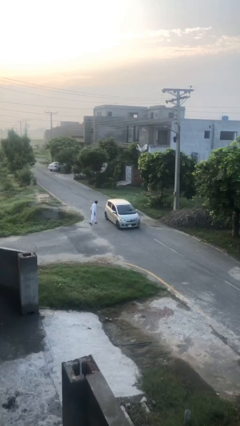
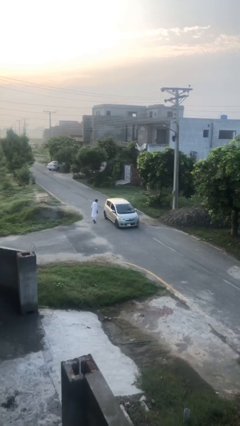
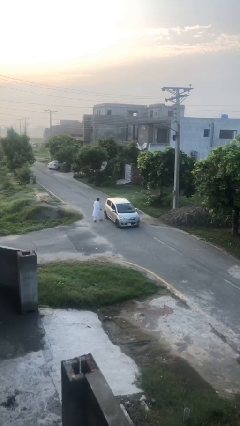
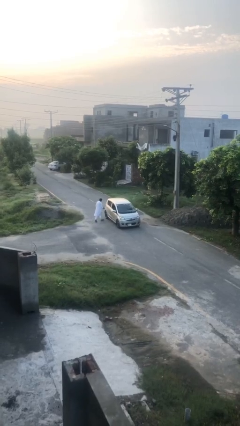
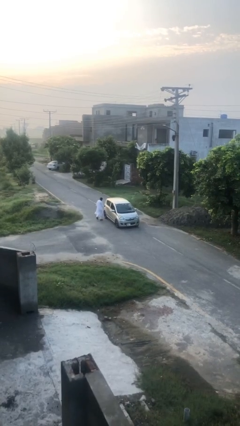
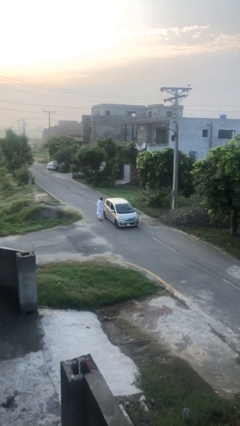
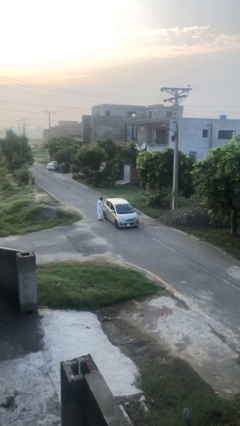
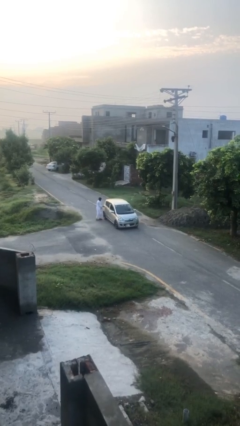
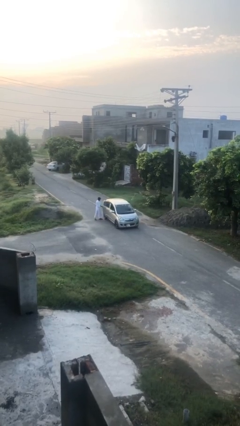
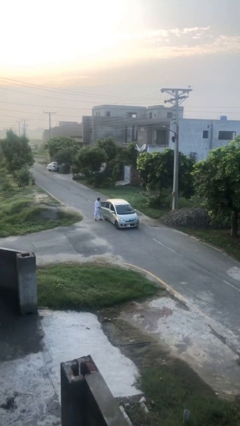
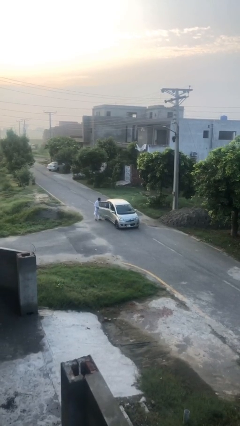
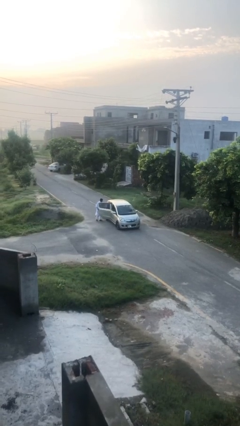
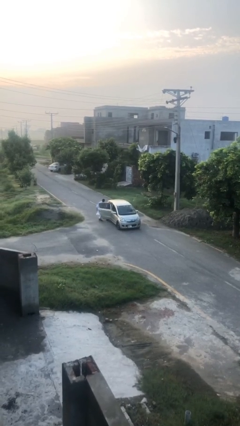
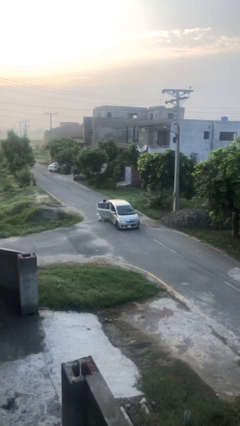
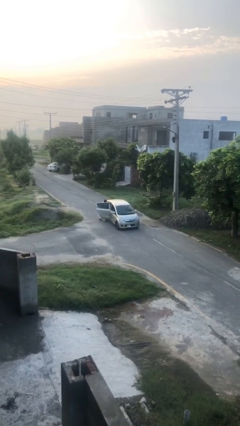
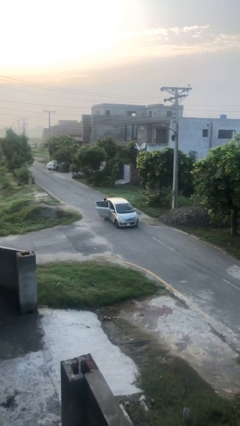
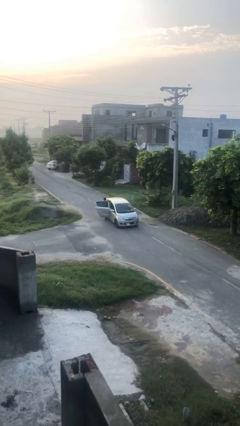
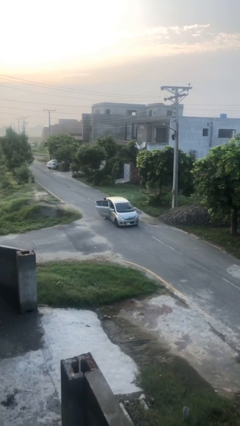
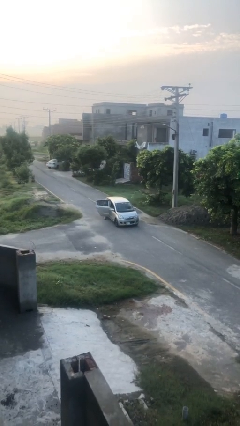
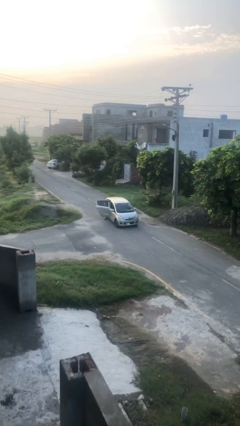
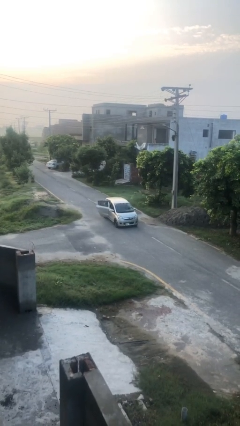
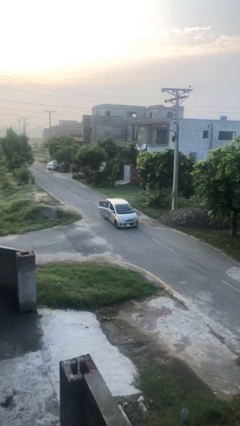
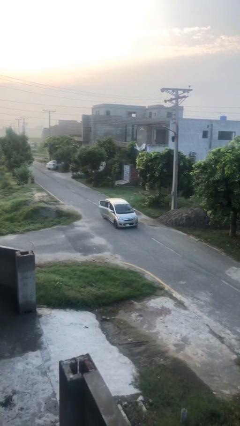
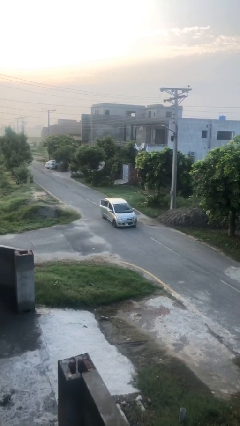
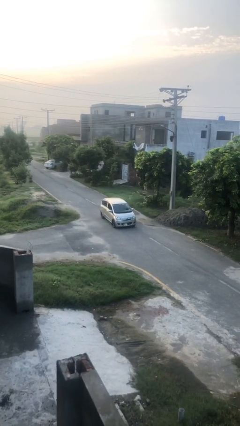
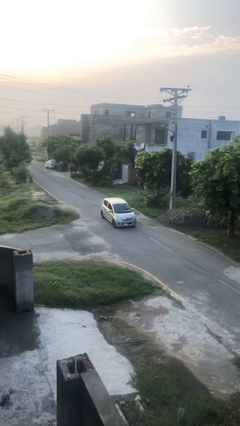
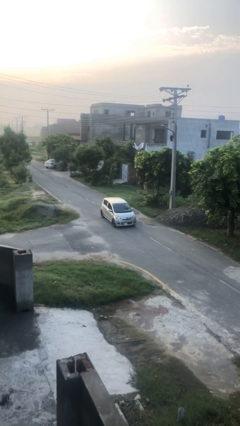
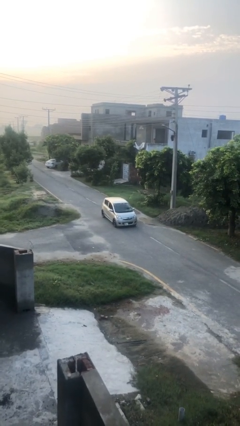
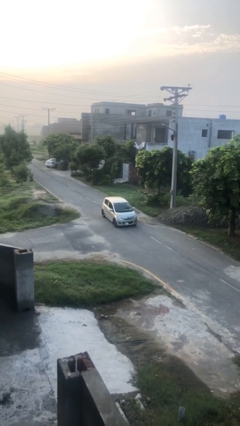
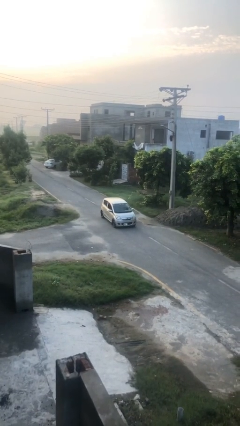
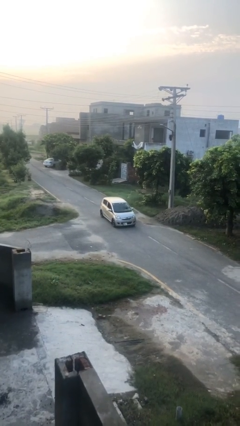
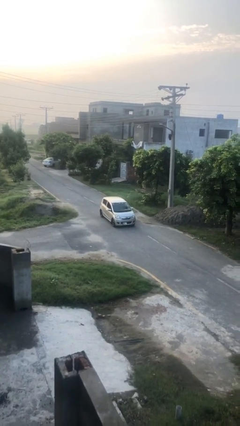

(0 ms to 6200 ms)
car picks up person

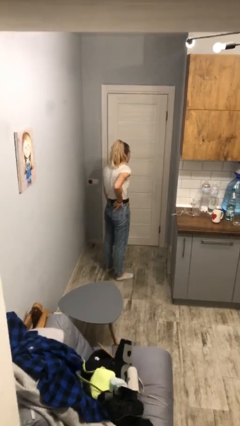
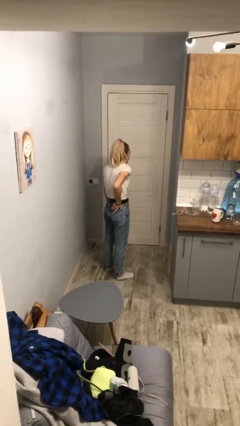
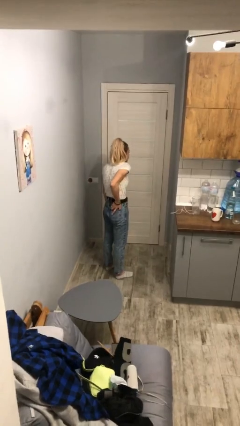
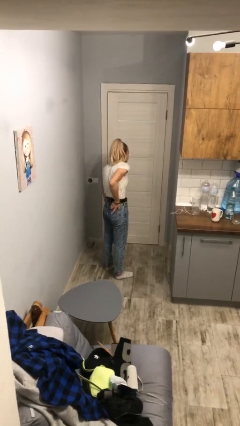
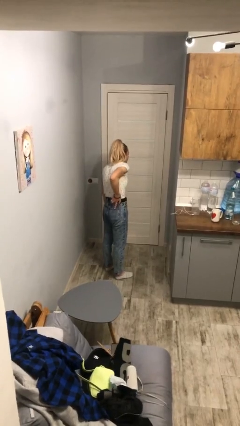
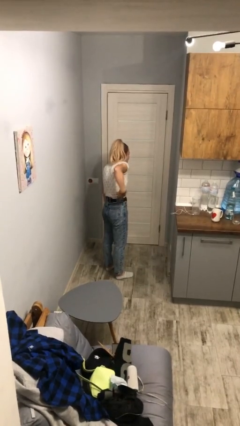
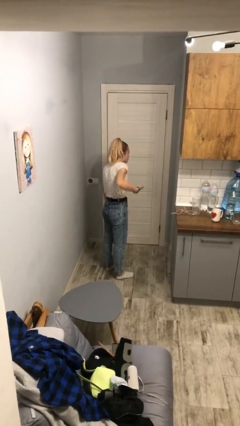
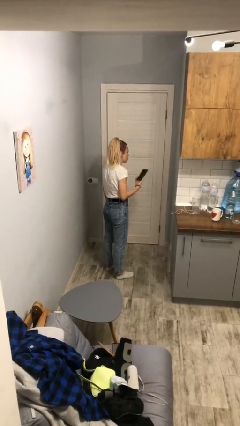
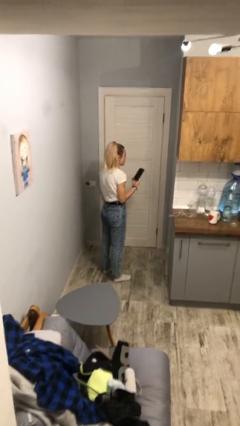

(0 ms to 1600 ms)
person takes phone from pocket

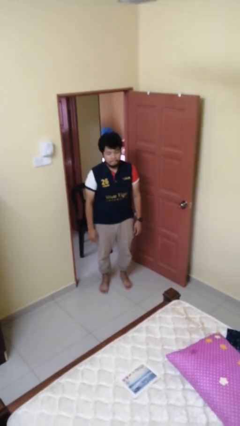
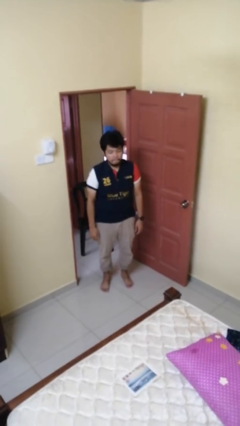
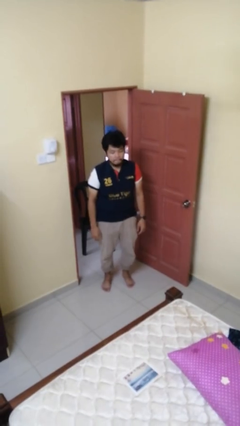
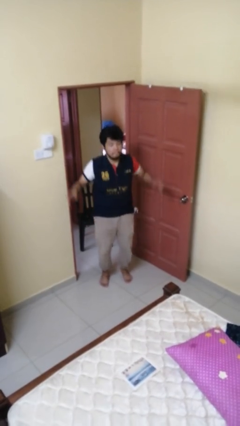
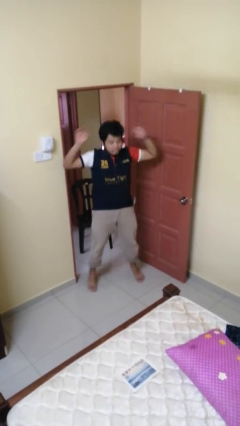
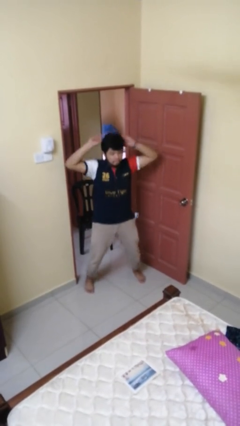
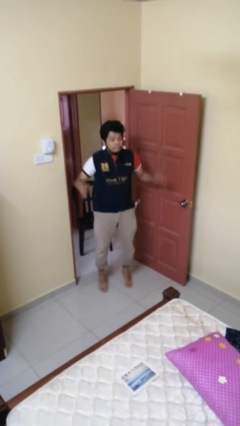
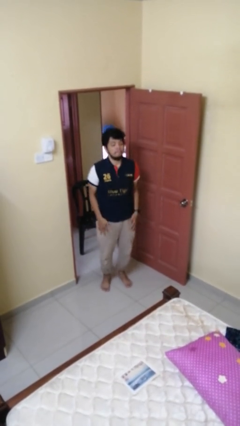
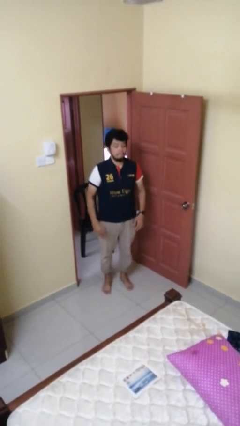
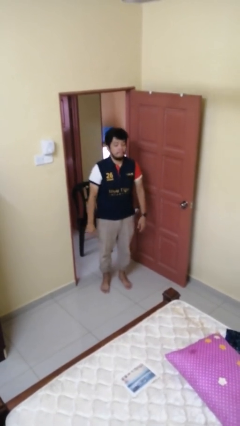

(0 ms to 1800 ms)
person exercises with jumping jacks

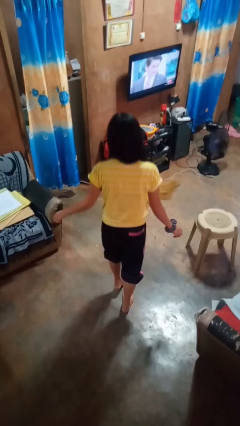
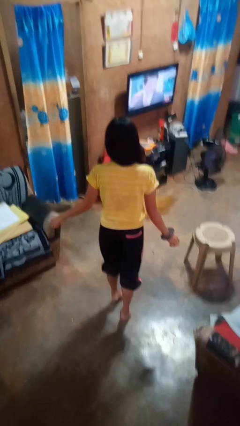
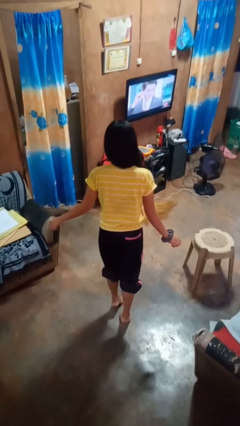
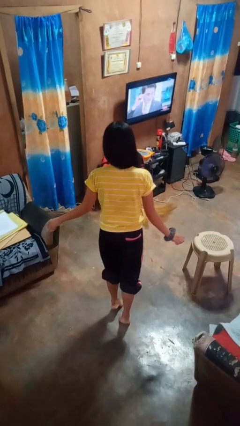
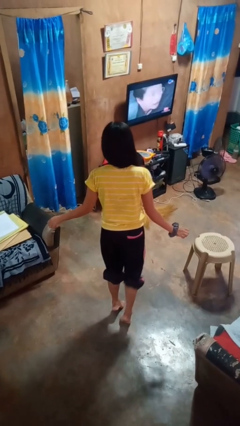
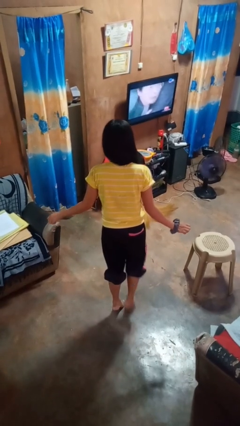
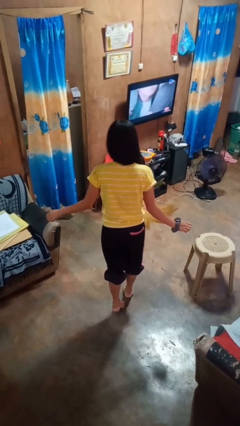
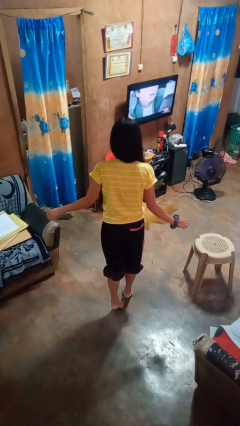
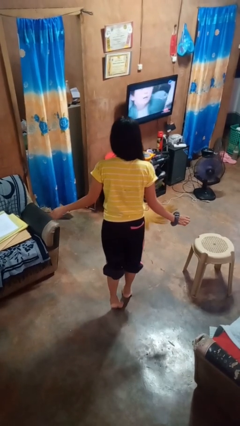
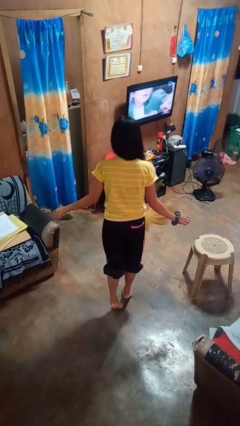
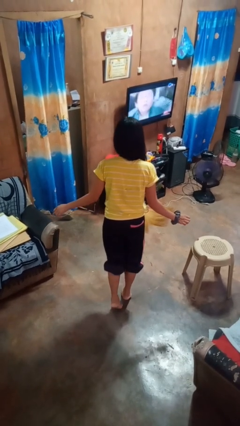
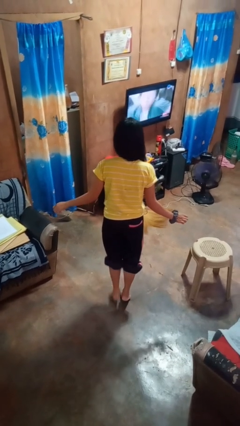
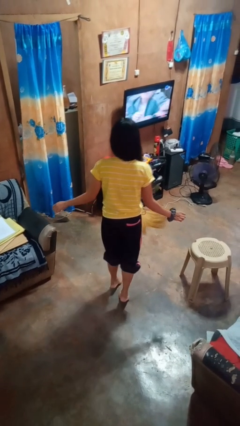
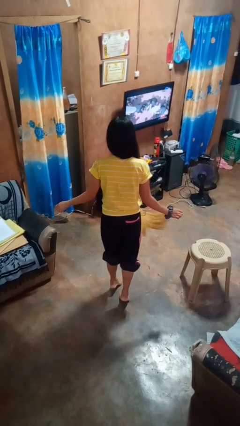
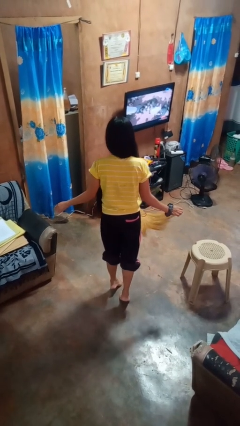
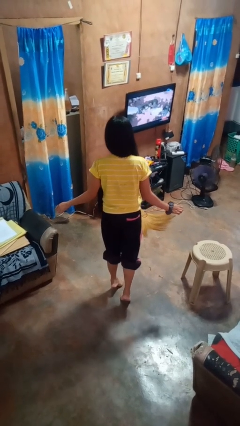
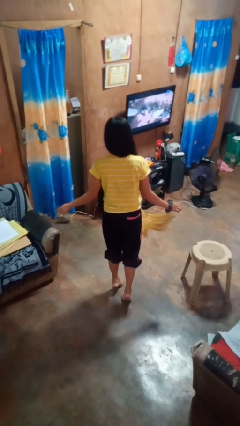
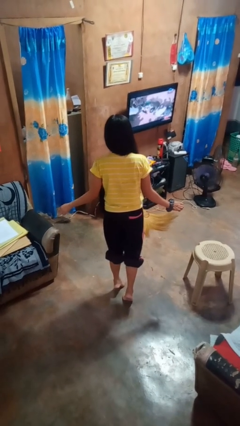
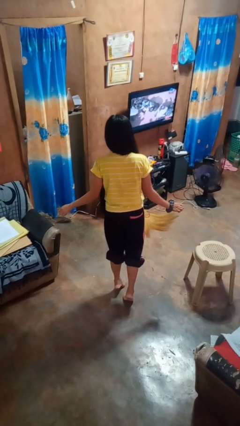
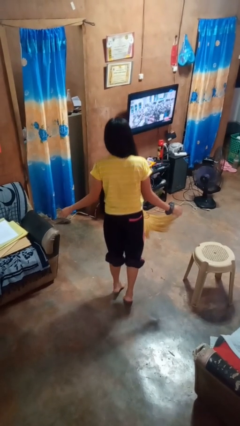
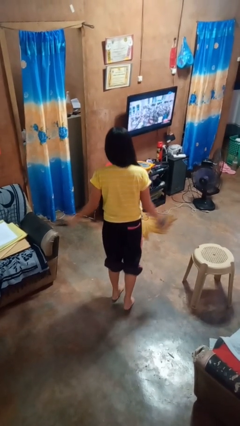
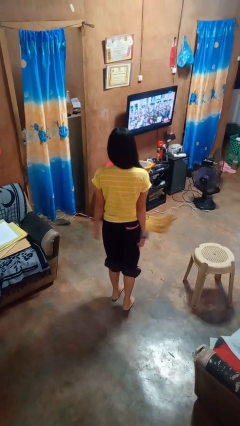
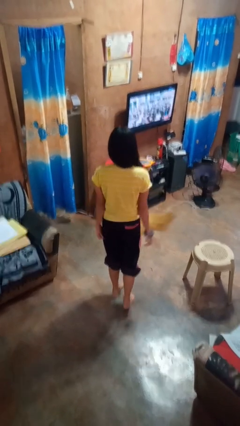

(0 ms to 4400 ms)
person walks tiptoe

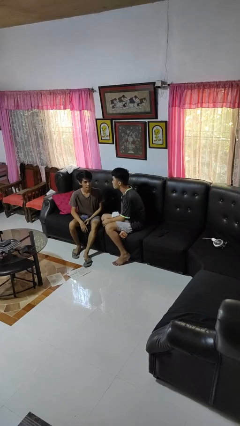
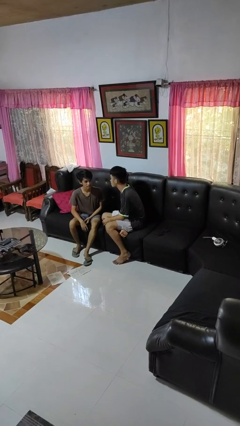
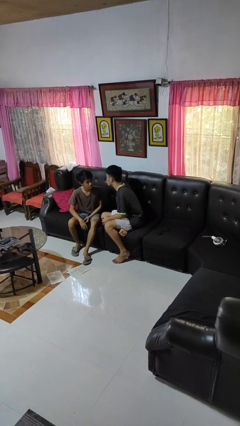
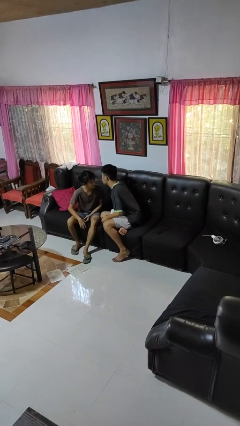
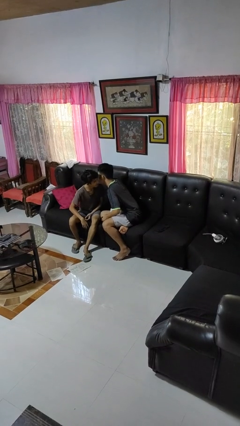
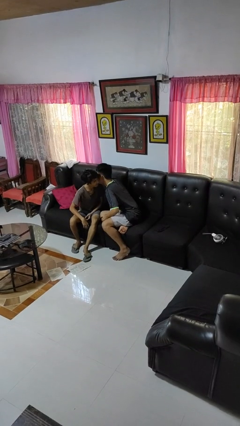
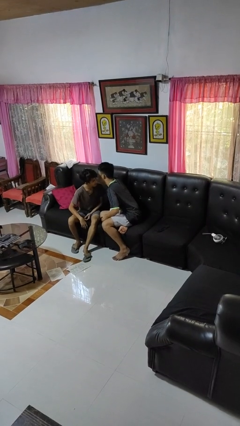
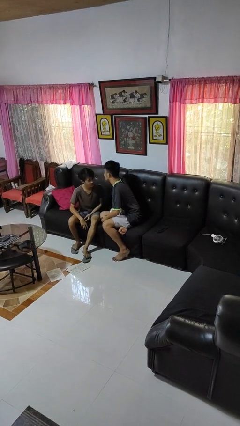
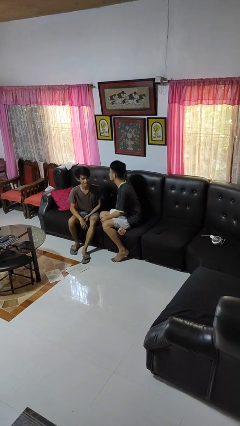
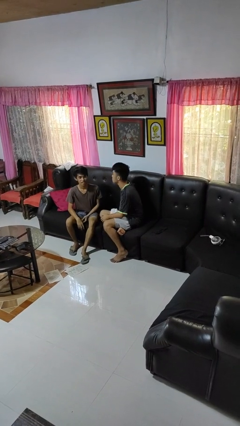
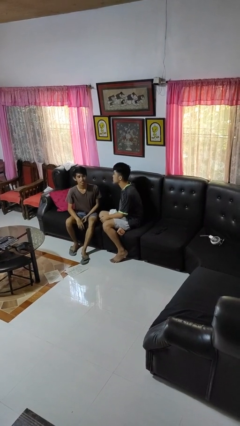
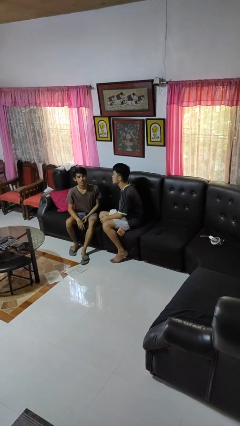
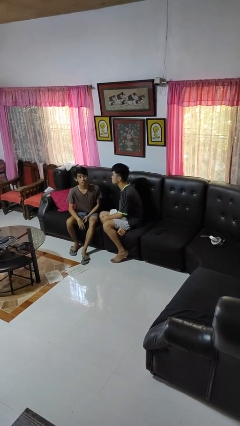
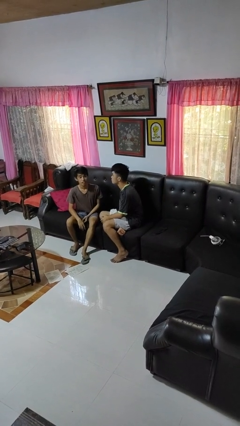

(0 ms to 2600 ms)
person kisses cheek of person

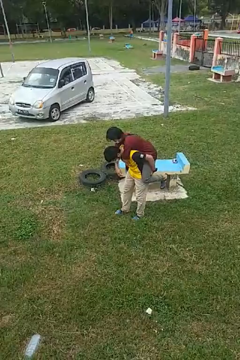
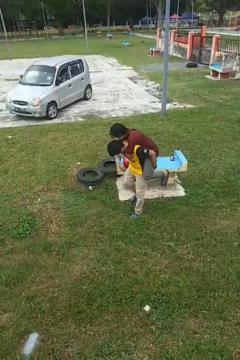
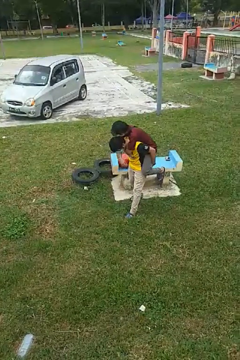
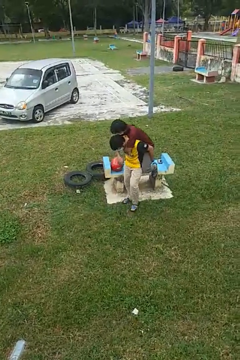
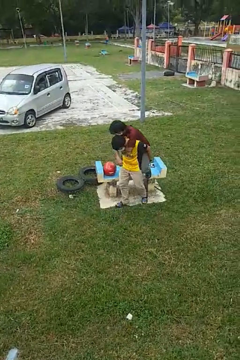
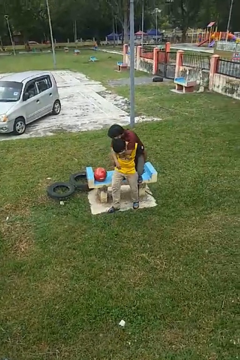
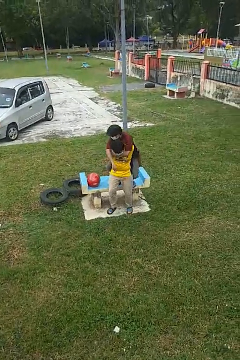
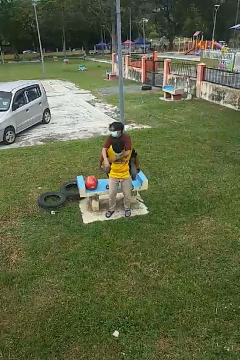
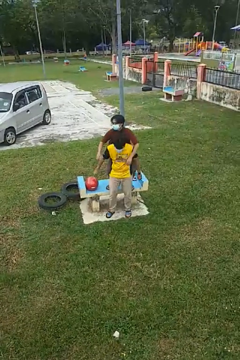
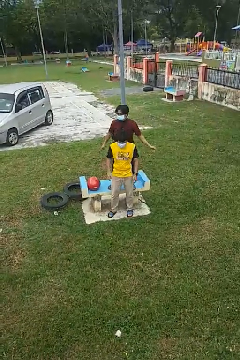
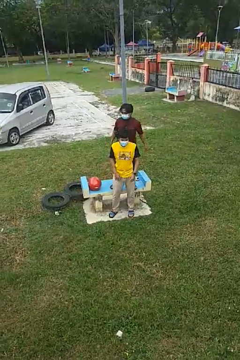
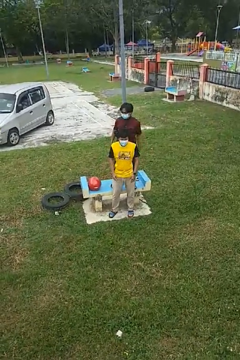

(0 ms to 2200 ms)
person puts down person
